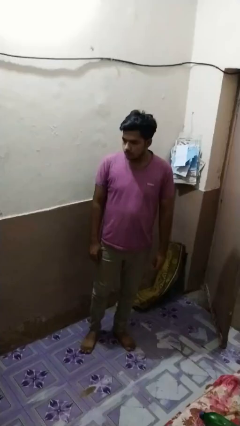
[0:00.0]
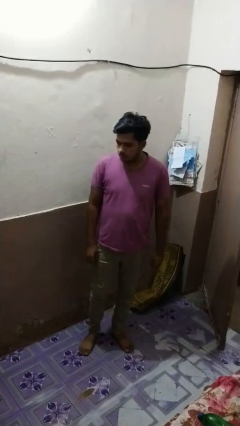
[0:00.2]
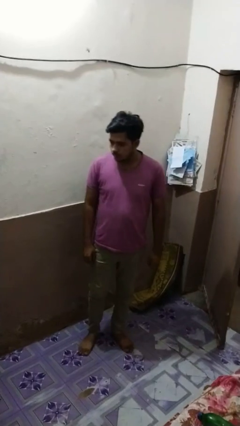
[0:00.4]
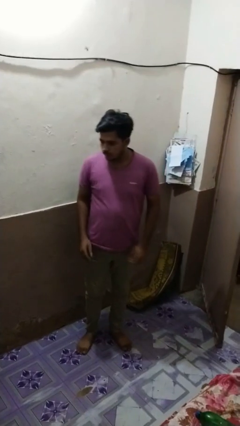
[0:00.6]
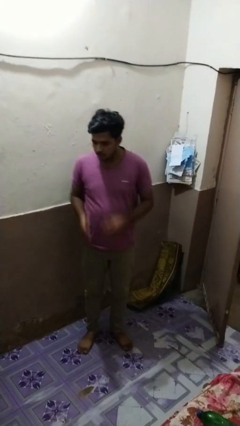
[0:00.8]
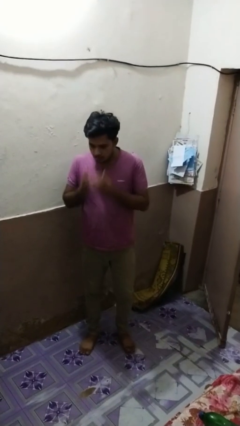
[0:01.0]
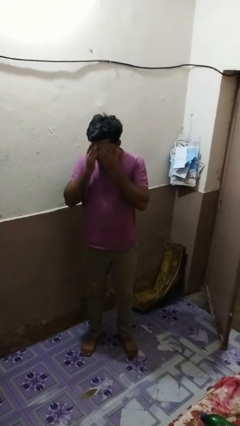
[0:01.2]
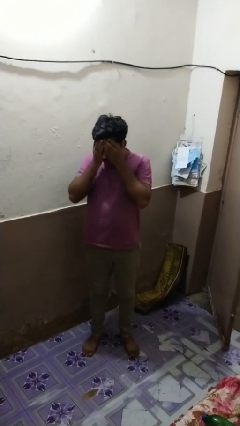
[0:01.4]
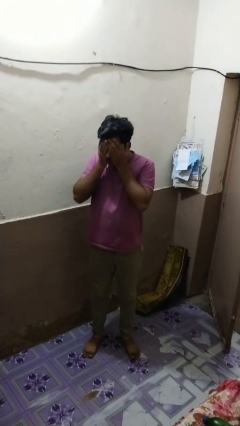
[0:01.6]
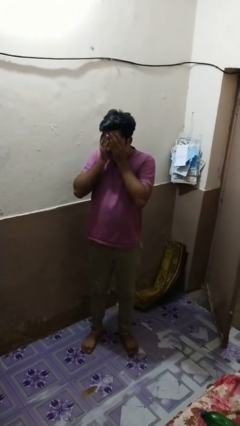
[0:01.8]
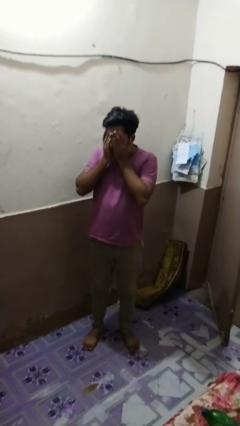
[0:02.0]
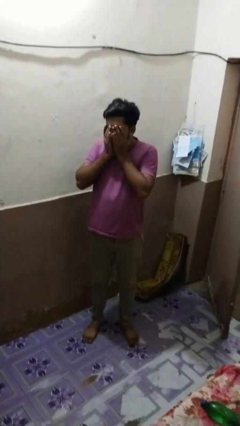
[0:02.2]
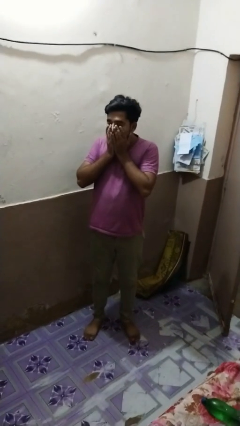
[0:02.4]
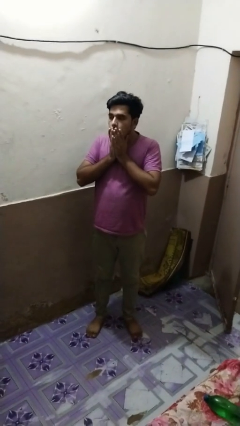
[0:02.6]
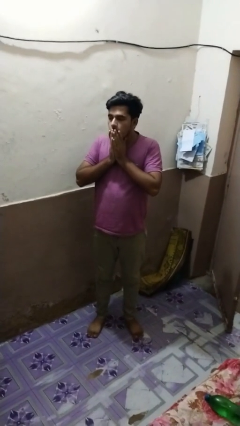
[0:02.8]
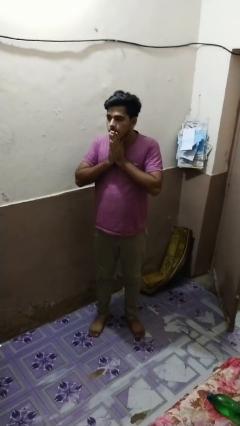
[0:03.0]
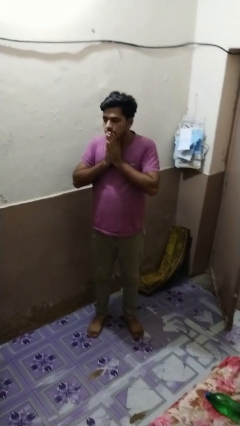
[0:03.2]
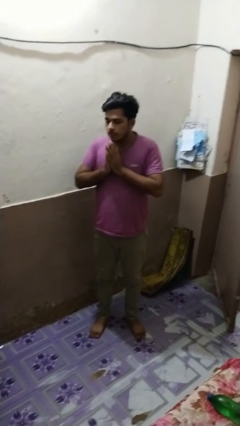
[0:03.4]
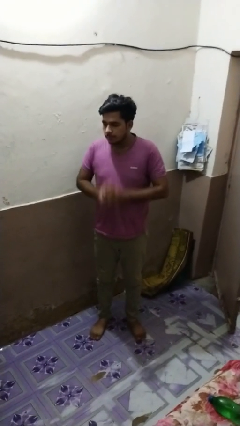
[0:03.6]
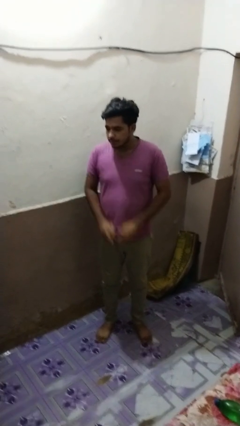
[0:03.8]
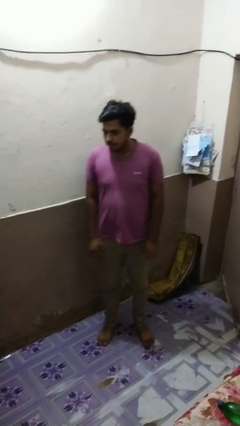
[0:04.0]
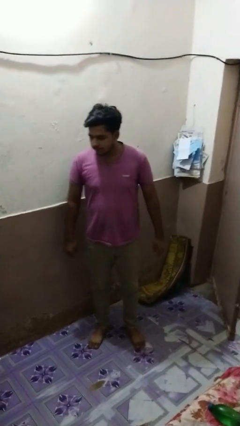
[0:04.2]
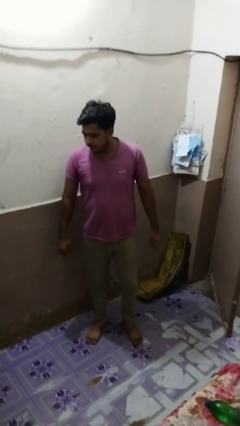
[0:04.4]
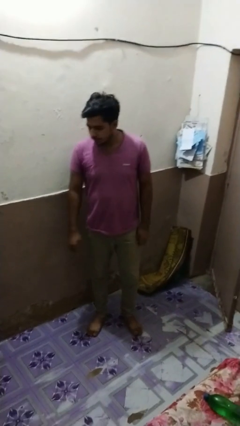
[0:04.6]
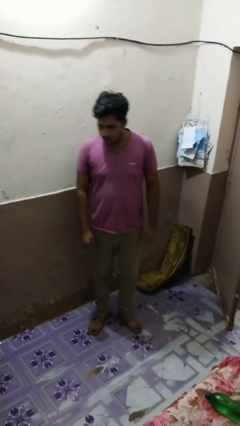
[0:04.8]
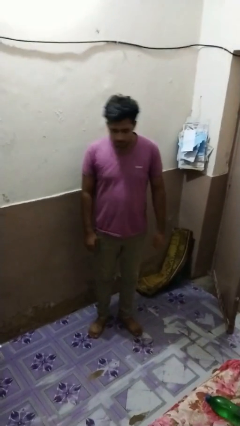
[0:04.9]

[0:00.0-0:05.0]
person covers face with hands

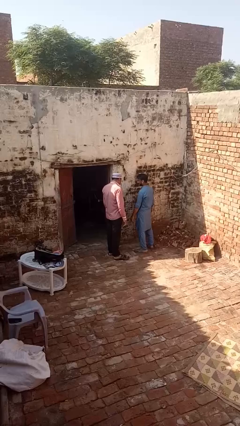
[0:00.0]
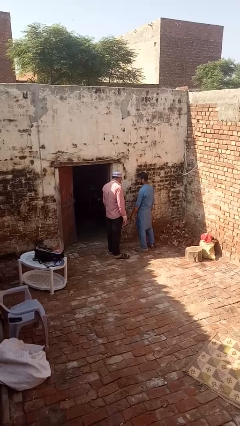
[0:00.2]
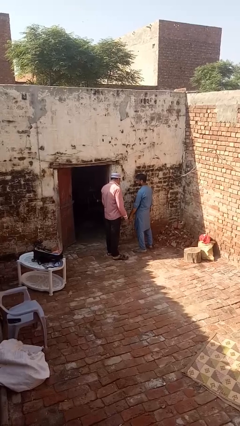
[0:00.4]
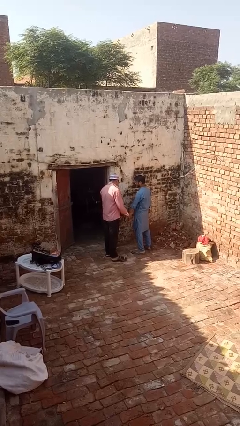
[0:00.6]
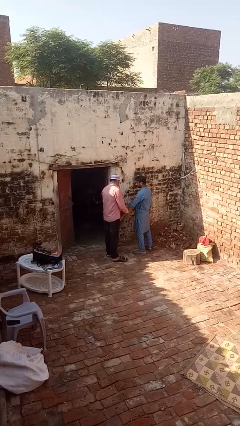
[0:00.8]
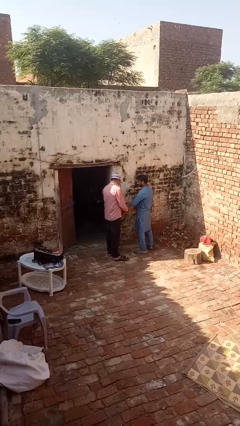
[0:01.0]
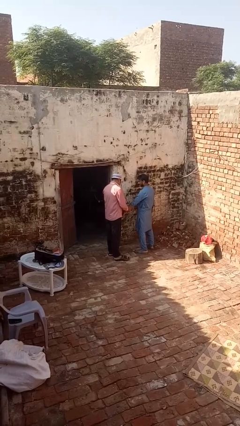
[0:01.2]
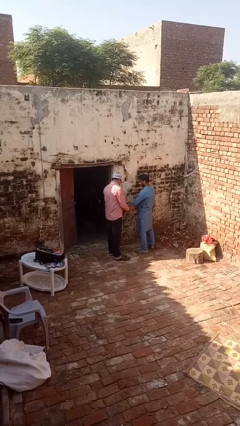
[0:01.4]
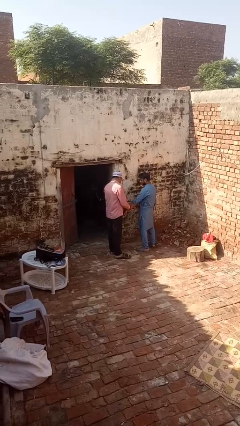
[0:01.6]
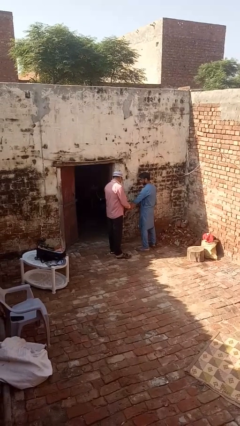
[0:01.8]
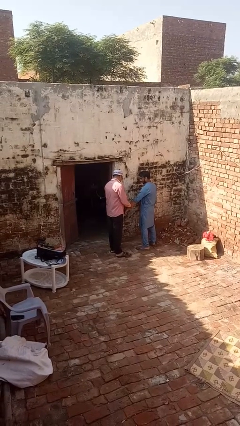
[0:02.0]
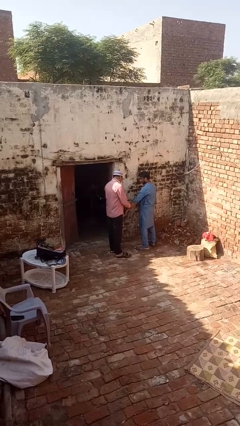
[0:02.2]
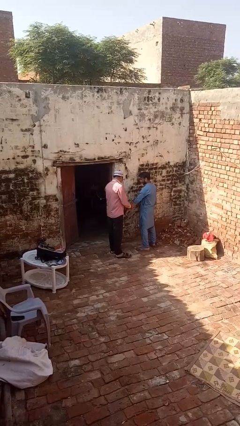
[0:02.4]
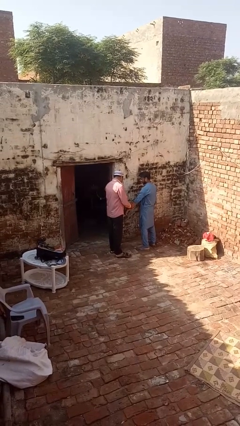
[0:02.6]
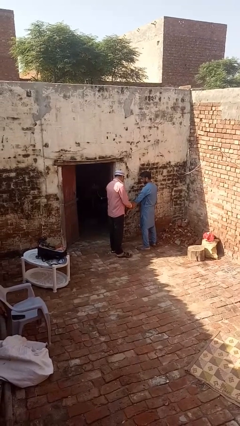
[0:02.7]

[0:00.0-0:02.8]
person grabs person by forearm

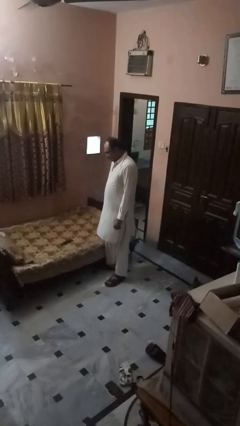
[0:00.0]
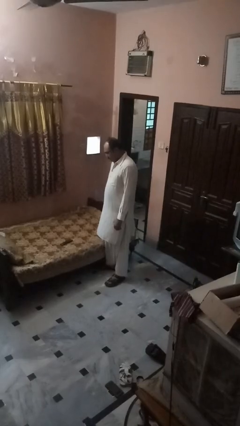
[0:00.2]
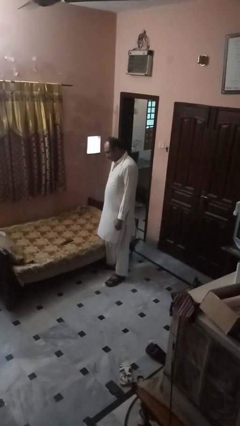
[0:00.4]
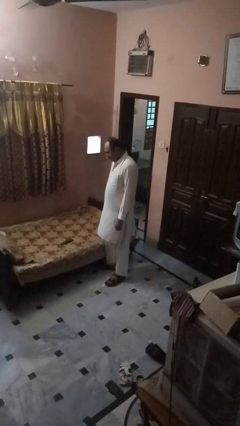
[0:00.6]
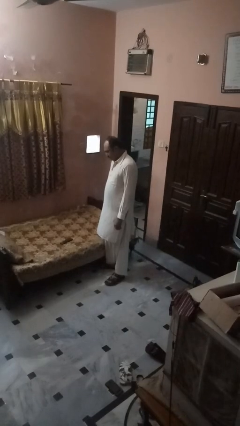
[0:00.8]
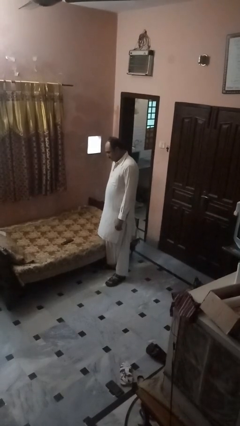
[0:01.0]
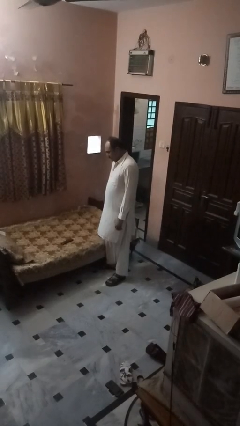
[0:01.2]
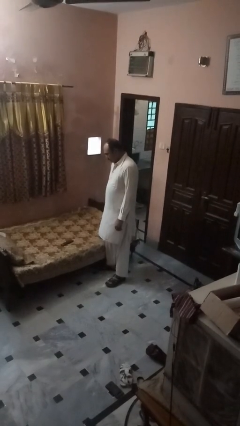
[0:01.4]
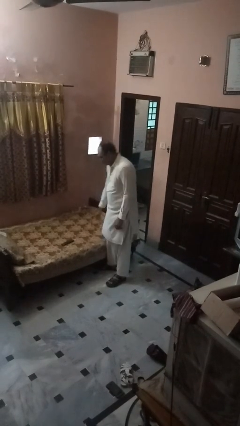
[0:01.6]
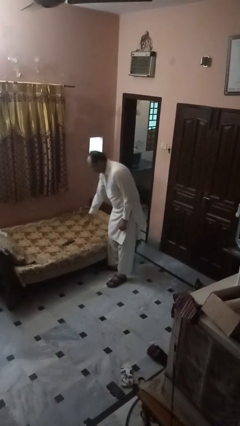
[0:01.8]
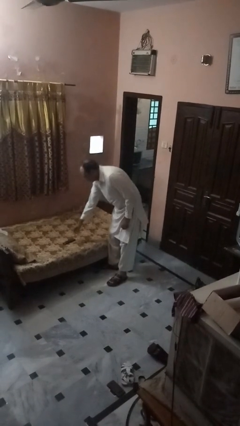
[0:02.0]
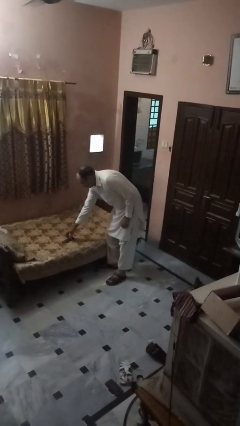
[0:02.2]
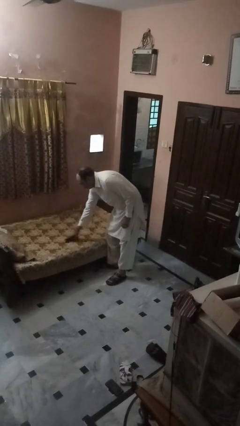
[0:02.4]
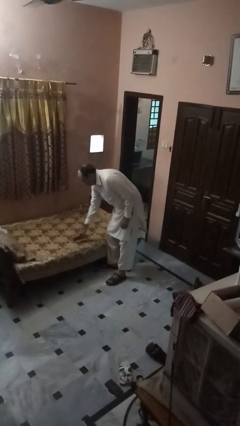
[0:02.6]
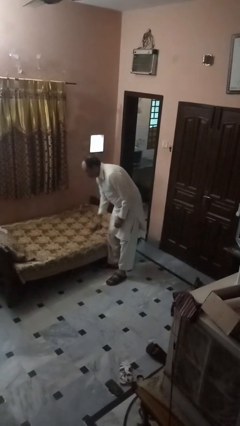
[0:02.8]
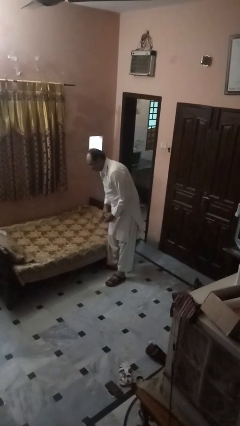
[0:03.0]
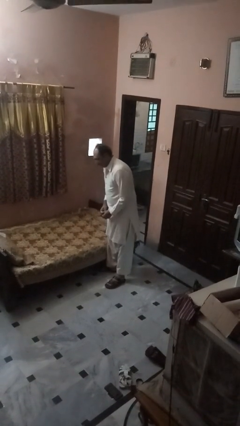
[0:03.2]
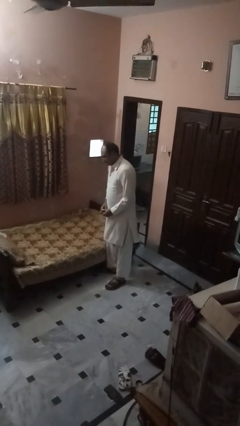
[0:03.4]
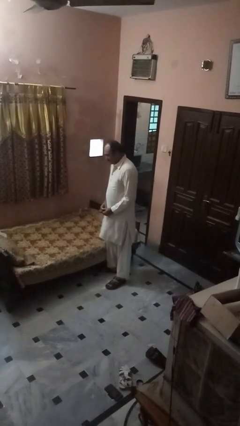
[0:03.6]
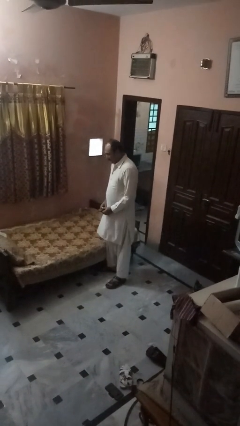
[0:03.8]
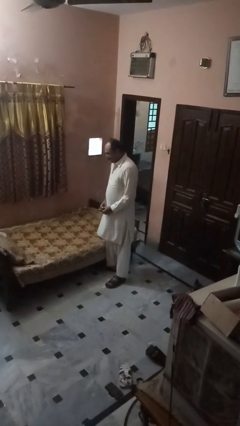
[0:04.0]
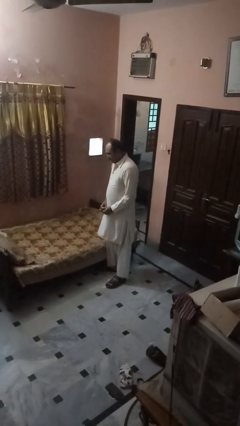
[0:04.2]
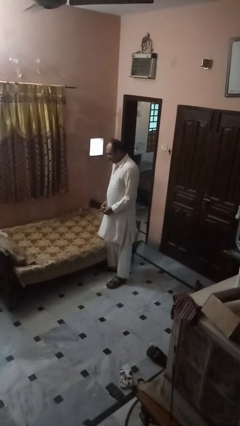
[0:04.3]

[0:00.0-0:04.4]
person picks up object from bed

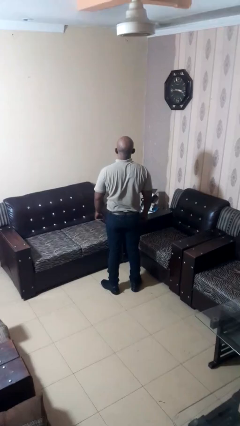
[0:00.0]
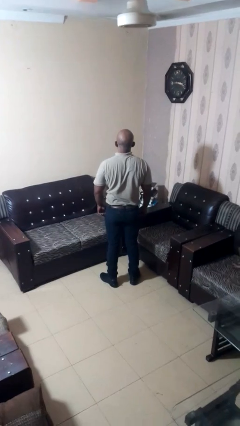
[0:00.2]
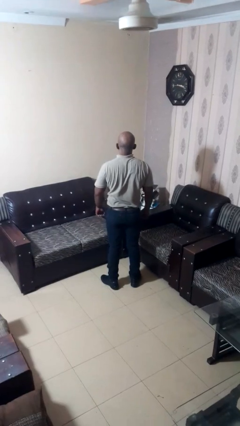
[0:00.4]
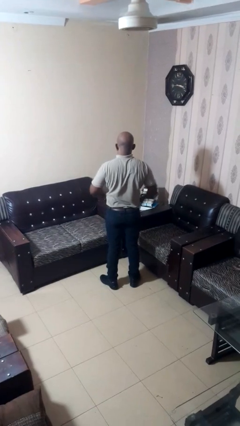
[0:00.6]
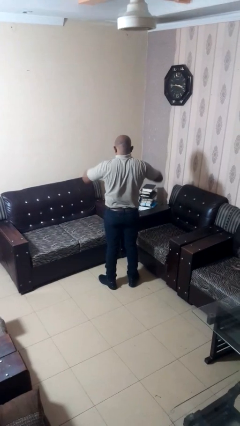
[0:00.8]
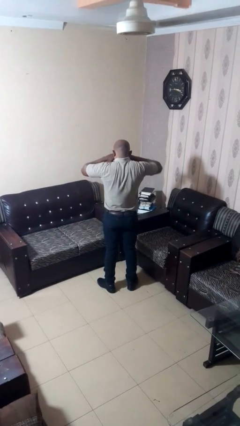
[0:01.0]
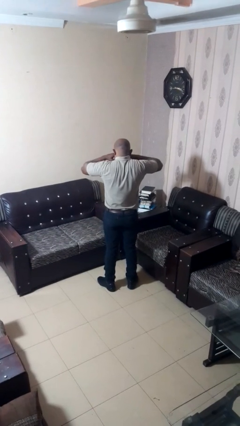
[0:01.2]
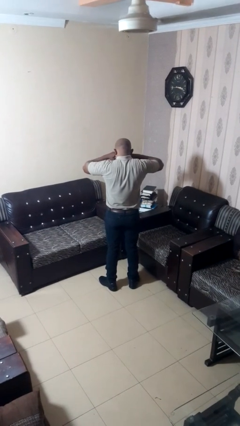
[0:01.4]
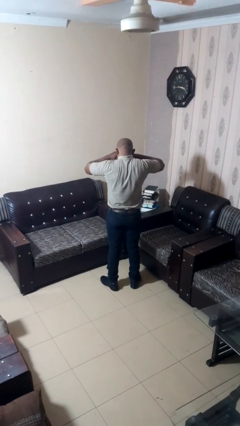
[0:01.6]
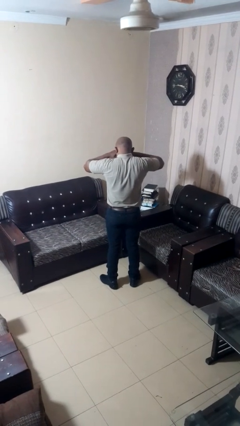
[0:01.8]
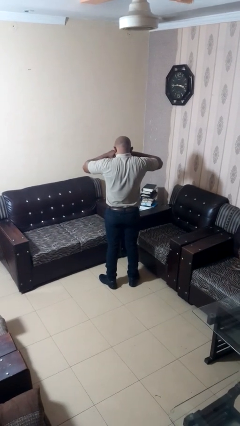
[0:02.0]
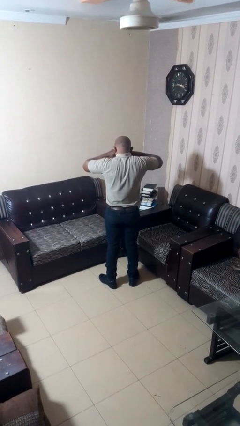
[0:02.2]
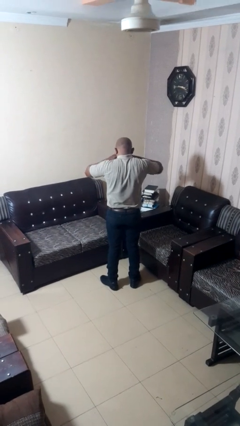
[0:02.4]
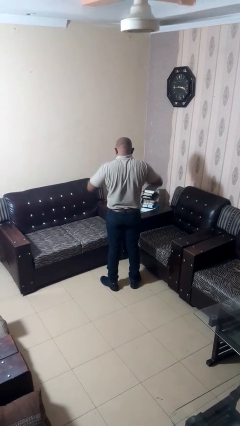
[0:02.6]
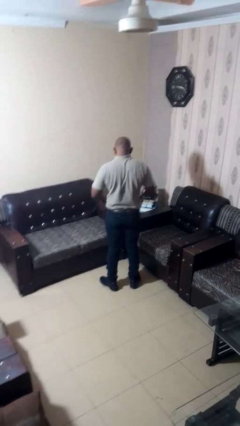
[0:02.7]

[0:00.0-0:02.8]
person rubs eyes

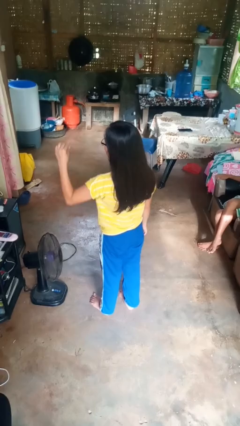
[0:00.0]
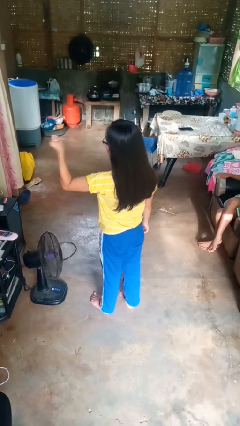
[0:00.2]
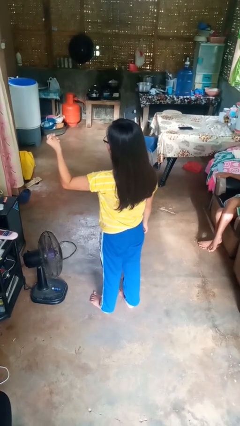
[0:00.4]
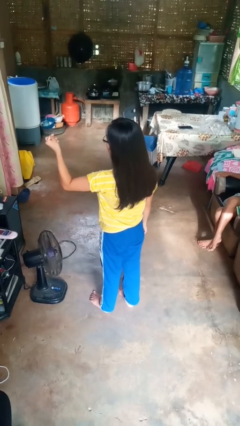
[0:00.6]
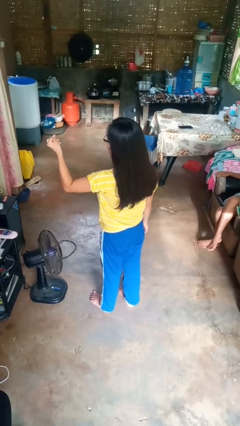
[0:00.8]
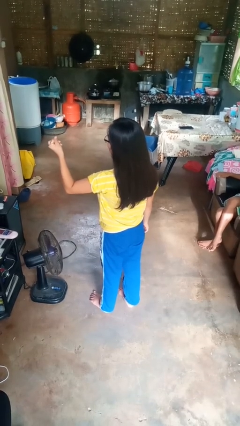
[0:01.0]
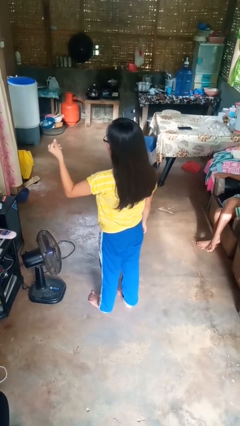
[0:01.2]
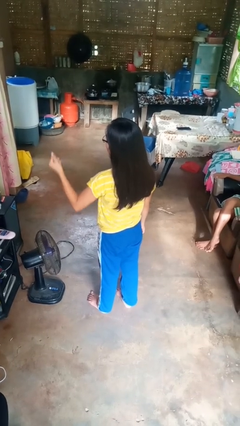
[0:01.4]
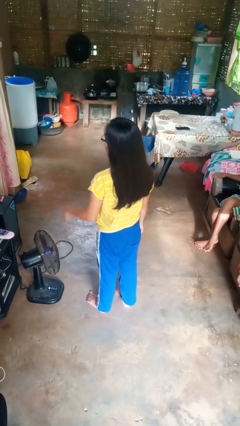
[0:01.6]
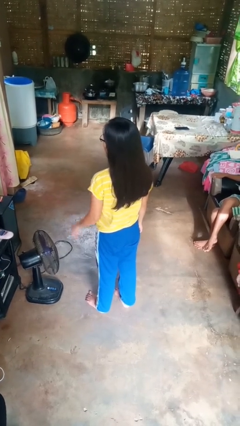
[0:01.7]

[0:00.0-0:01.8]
person snaps fingers

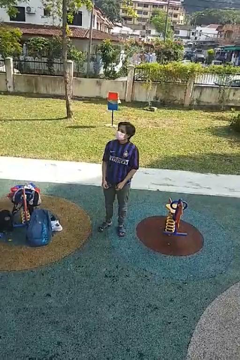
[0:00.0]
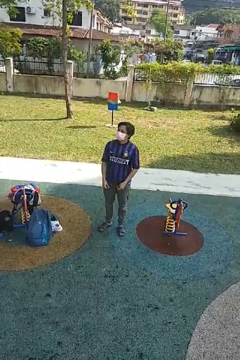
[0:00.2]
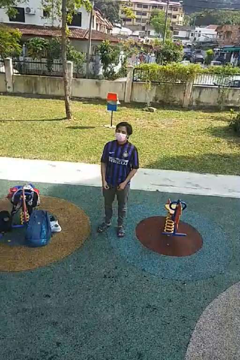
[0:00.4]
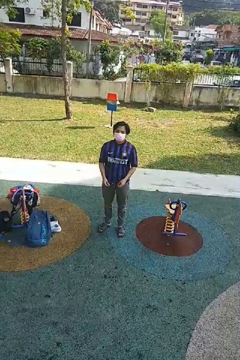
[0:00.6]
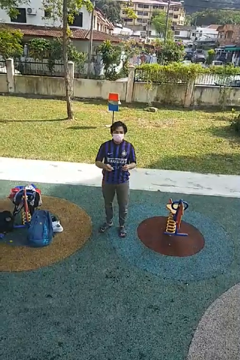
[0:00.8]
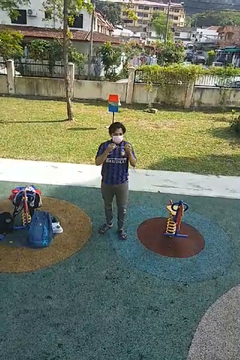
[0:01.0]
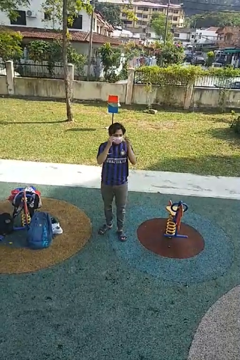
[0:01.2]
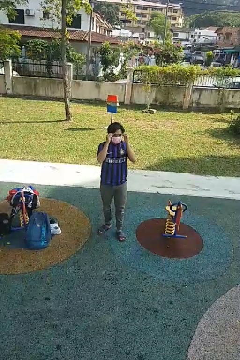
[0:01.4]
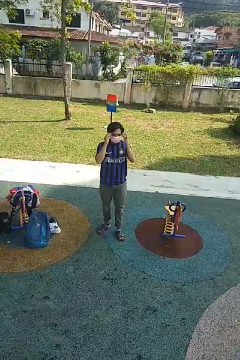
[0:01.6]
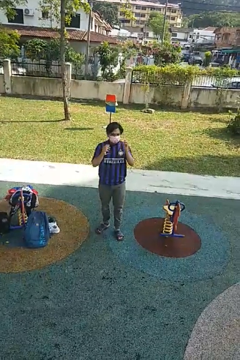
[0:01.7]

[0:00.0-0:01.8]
person puts on glasses
